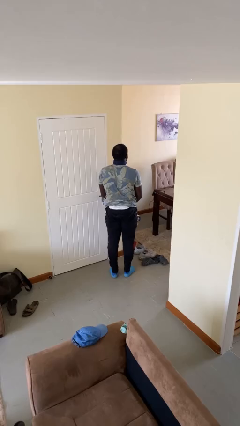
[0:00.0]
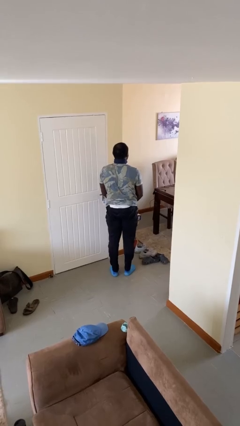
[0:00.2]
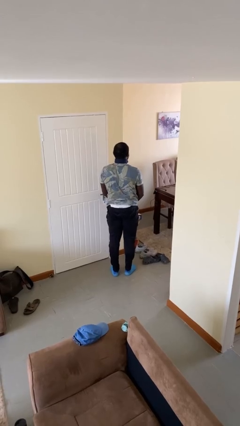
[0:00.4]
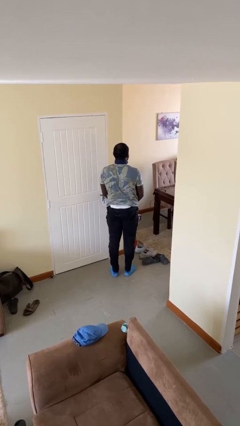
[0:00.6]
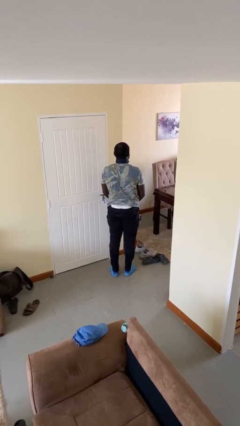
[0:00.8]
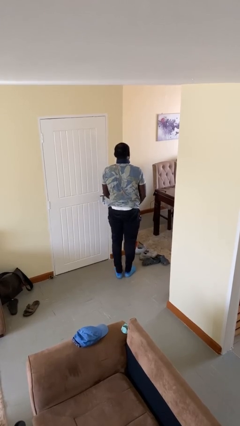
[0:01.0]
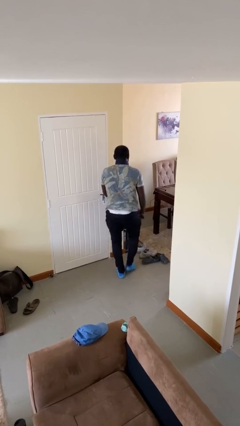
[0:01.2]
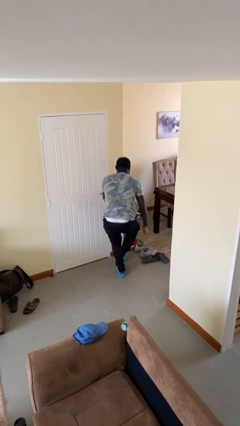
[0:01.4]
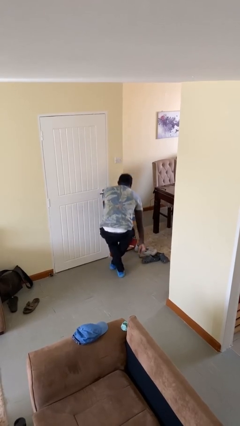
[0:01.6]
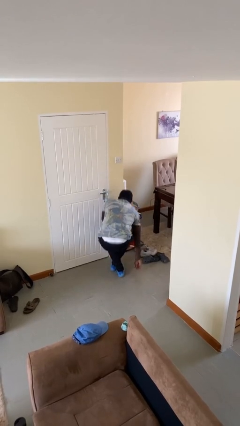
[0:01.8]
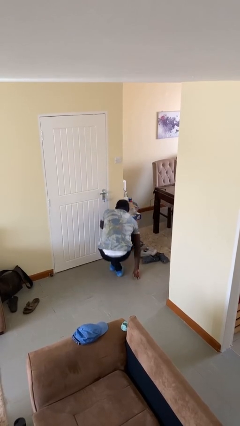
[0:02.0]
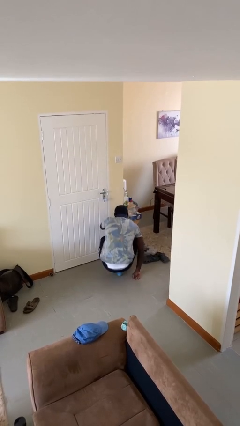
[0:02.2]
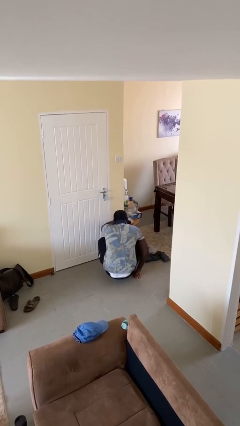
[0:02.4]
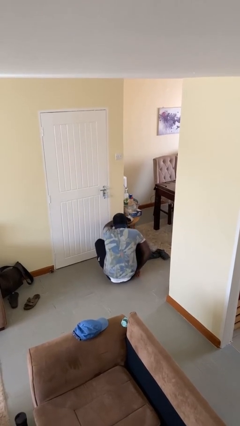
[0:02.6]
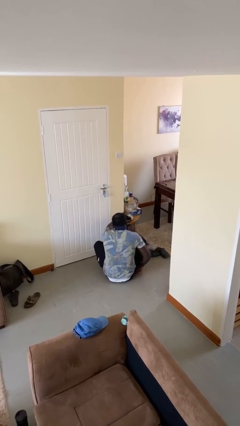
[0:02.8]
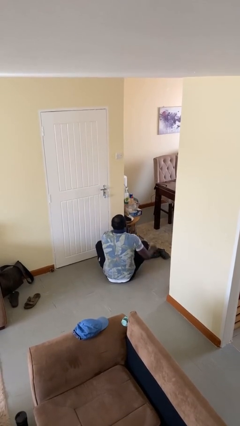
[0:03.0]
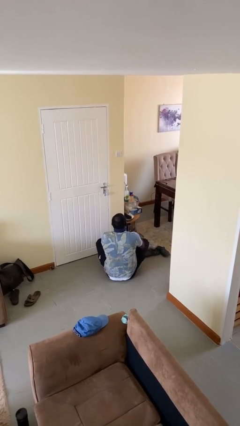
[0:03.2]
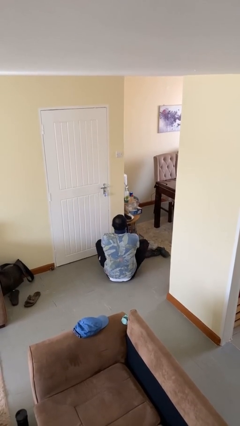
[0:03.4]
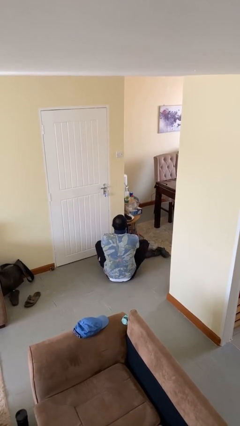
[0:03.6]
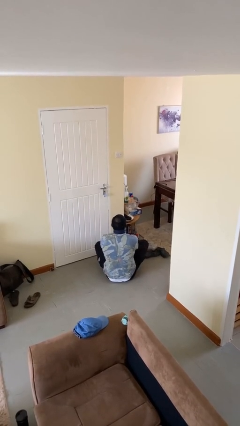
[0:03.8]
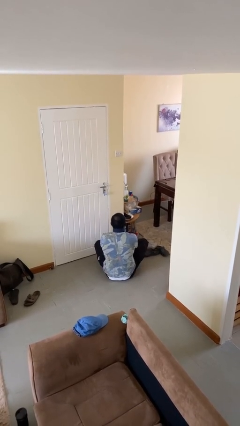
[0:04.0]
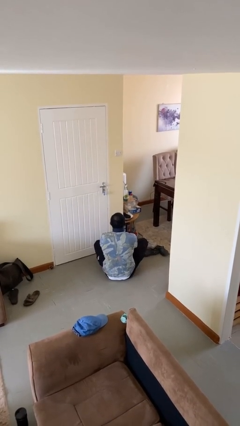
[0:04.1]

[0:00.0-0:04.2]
person sits crisscross

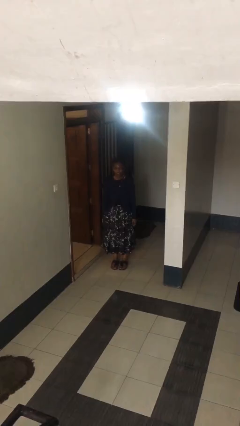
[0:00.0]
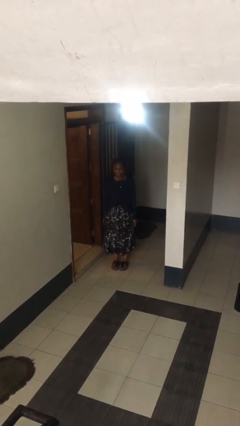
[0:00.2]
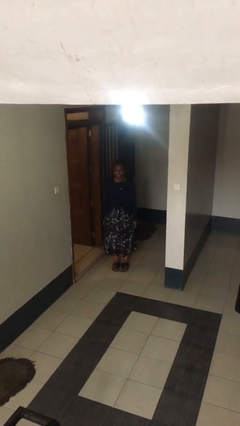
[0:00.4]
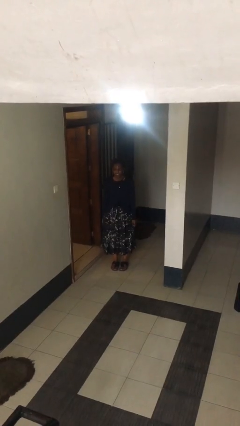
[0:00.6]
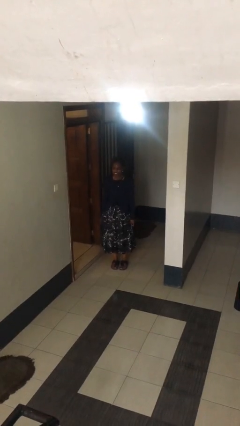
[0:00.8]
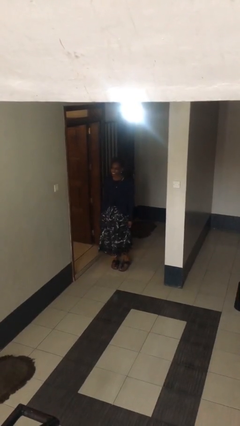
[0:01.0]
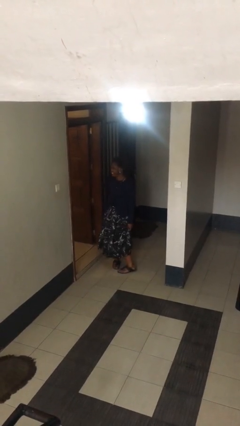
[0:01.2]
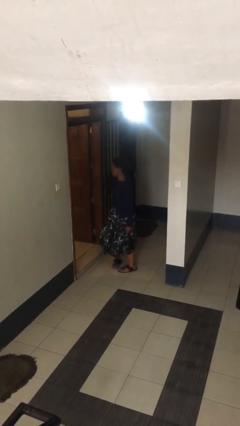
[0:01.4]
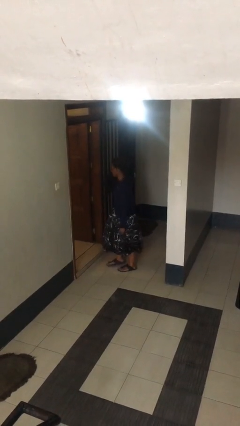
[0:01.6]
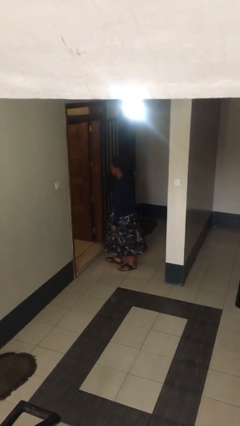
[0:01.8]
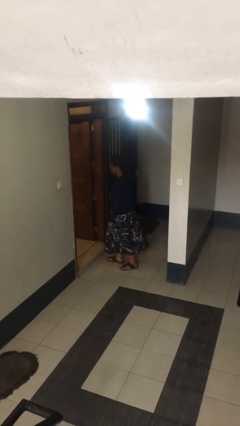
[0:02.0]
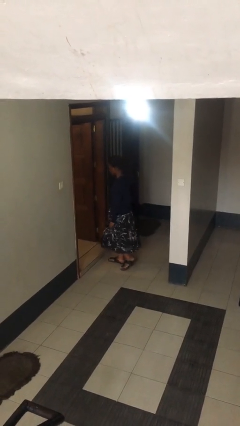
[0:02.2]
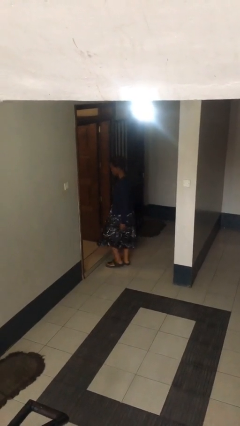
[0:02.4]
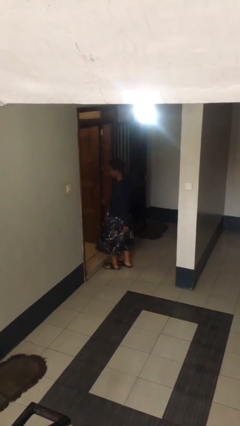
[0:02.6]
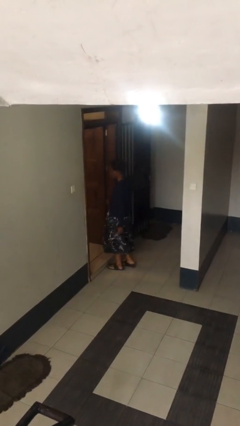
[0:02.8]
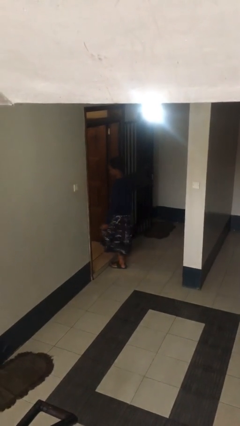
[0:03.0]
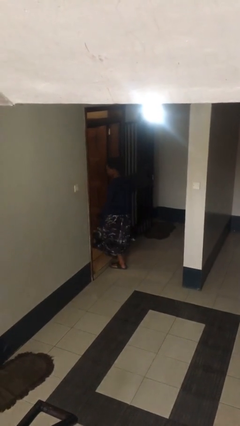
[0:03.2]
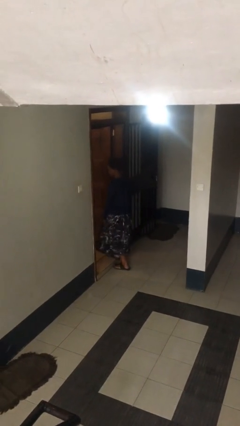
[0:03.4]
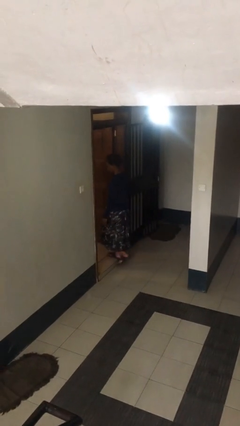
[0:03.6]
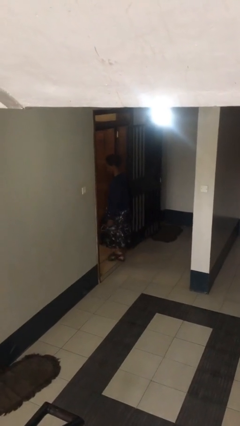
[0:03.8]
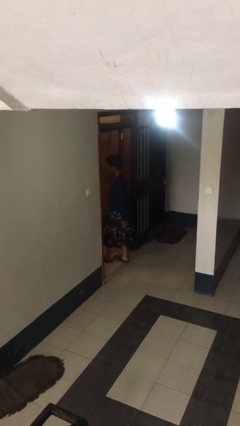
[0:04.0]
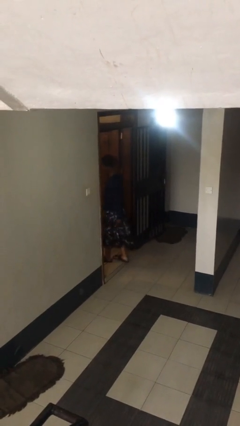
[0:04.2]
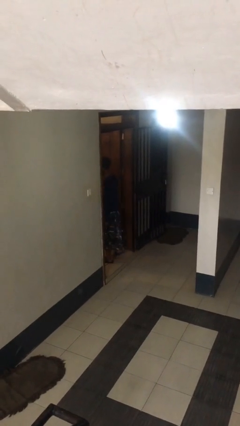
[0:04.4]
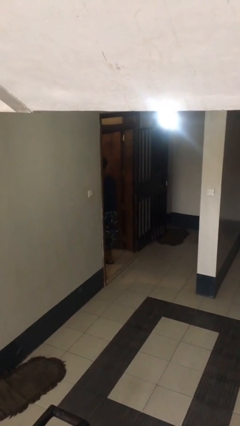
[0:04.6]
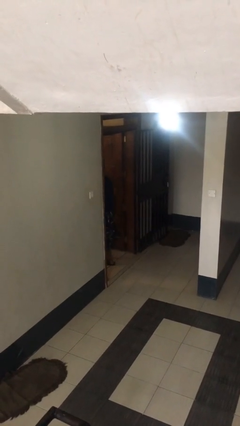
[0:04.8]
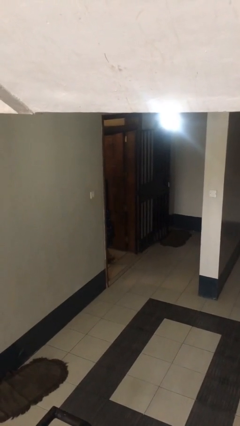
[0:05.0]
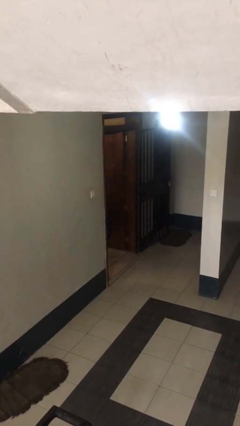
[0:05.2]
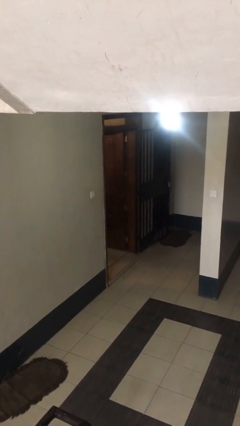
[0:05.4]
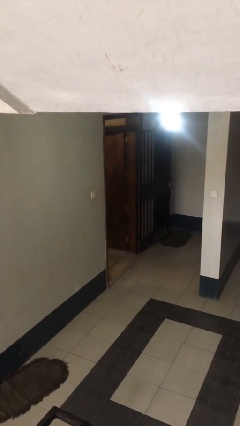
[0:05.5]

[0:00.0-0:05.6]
person exits scene through structure

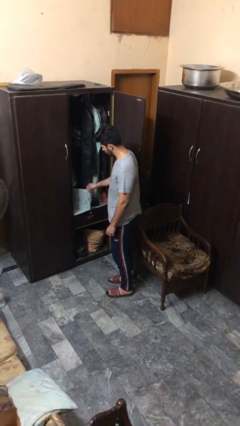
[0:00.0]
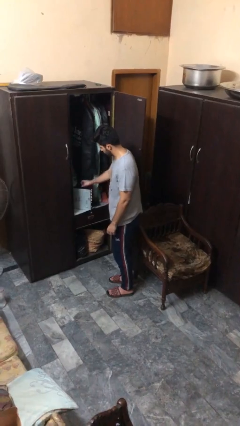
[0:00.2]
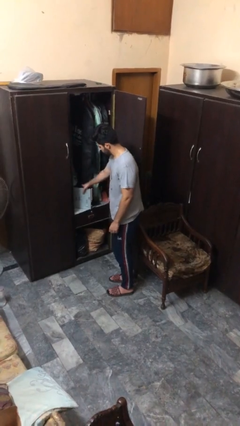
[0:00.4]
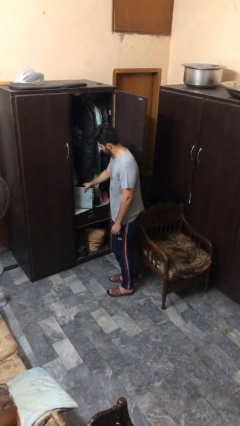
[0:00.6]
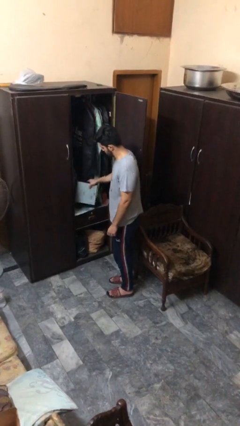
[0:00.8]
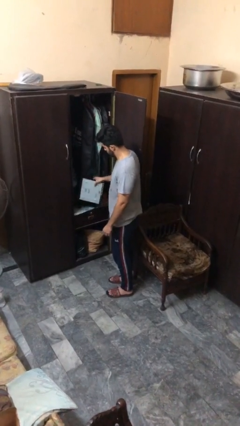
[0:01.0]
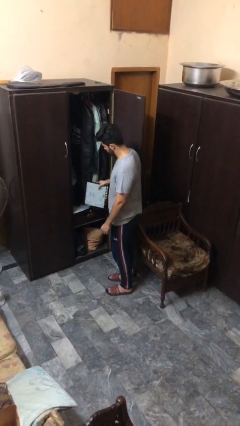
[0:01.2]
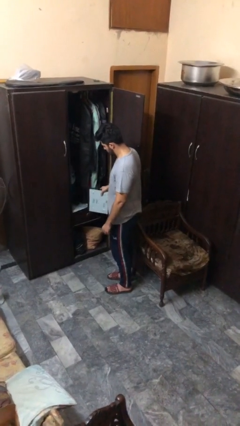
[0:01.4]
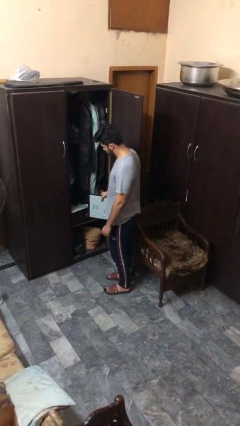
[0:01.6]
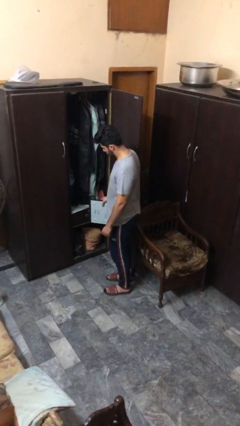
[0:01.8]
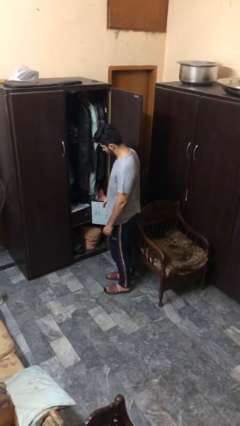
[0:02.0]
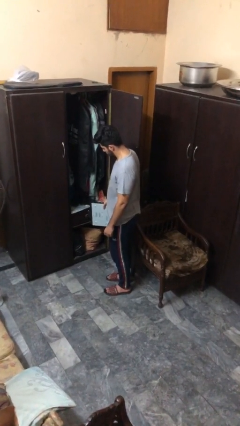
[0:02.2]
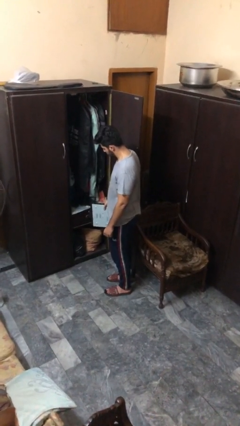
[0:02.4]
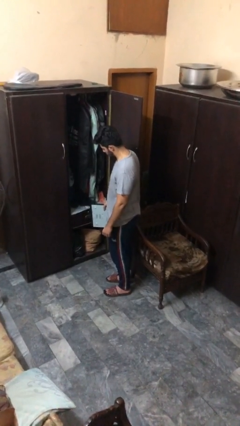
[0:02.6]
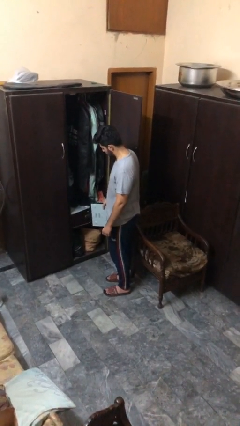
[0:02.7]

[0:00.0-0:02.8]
person picks up object from countertop

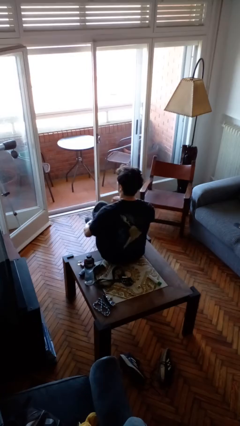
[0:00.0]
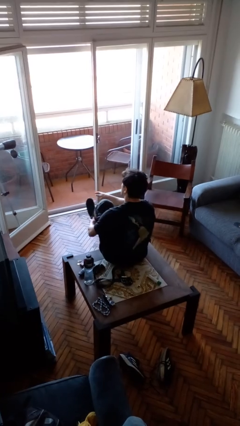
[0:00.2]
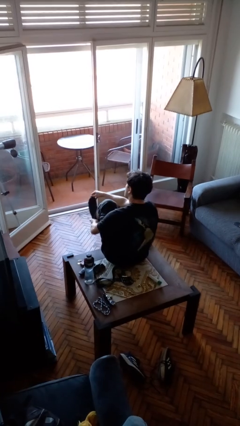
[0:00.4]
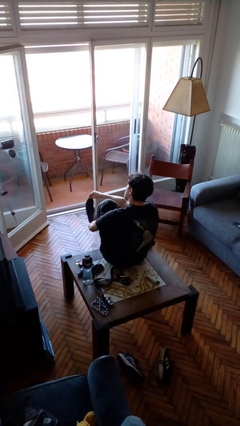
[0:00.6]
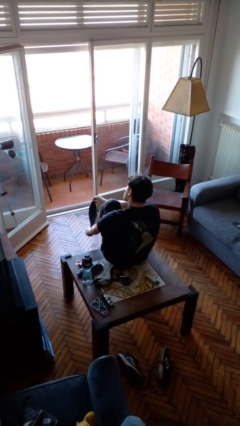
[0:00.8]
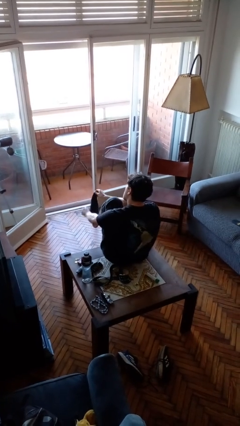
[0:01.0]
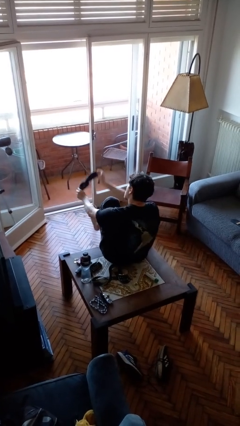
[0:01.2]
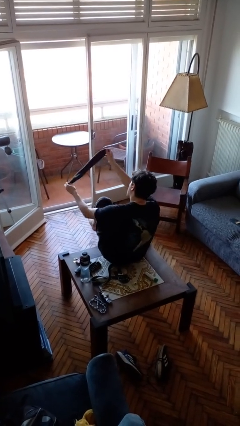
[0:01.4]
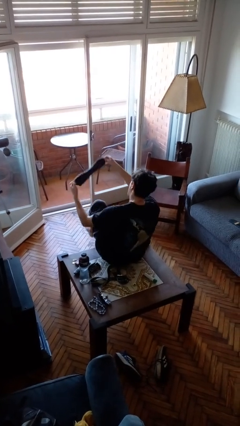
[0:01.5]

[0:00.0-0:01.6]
person takes off socks

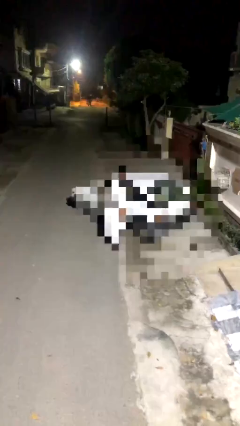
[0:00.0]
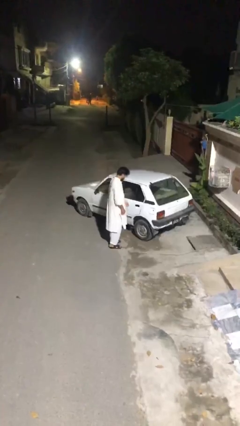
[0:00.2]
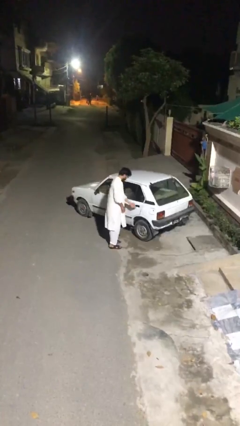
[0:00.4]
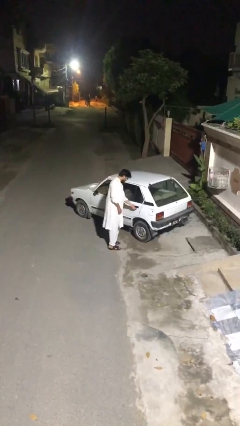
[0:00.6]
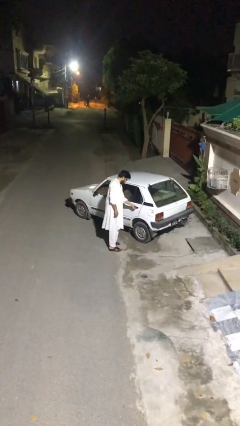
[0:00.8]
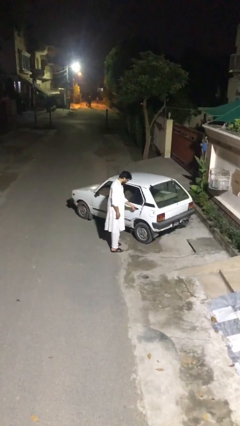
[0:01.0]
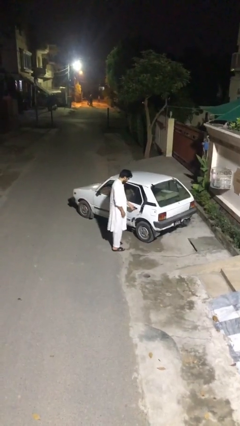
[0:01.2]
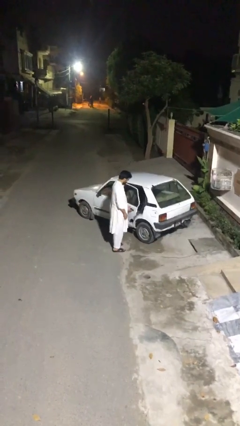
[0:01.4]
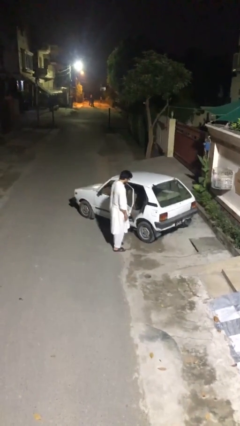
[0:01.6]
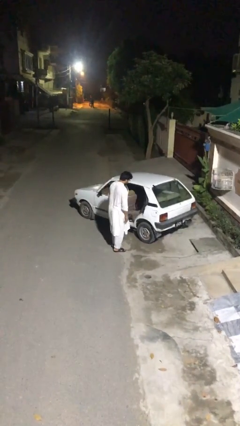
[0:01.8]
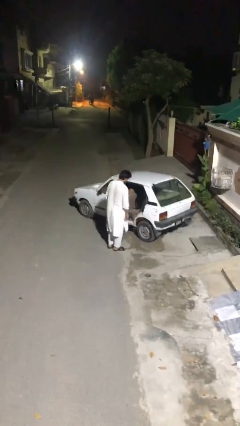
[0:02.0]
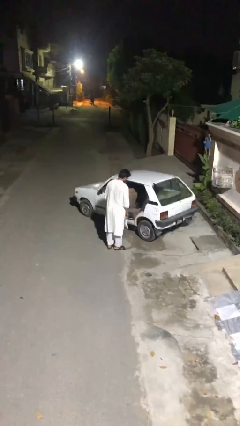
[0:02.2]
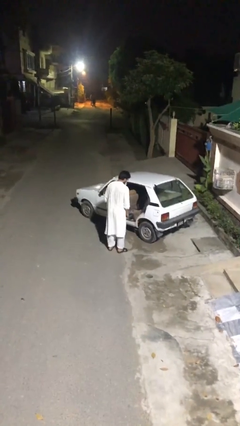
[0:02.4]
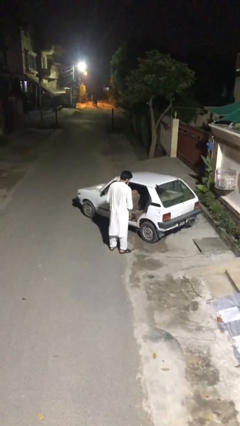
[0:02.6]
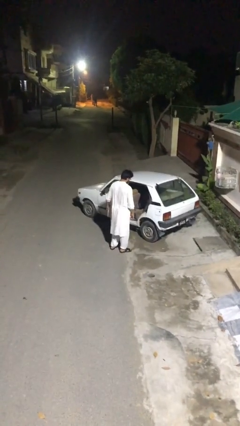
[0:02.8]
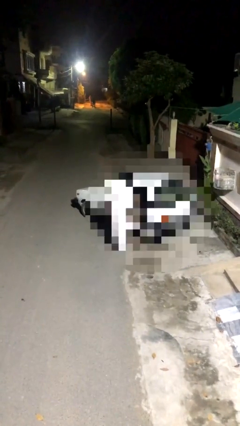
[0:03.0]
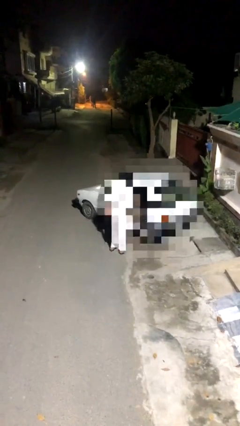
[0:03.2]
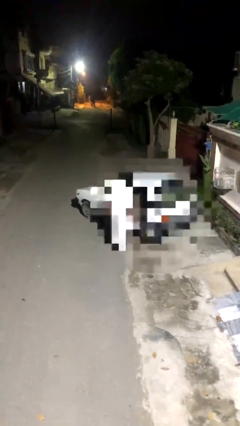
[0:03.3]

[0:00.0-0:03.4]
person opens car door

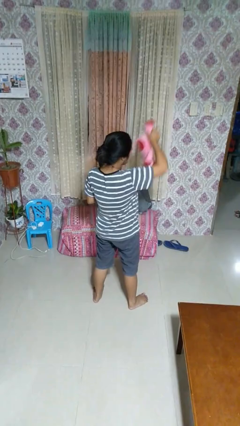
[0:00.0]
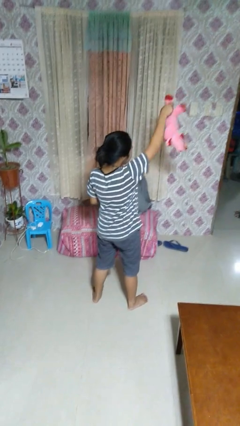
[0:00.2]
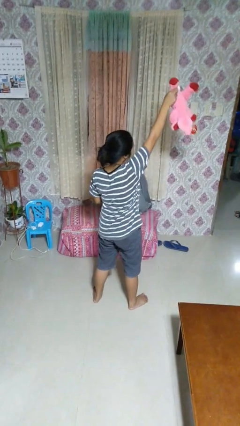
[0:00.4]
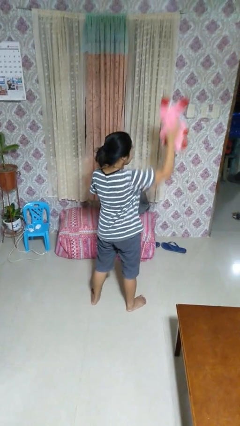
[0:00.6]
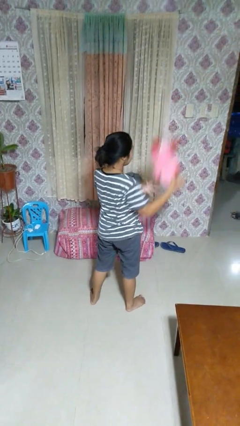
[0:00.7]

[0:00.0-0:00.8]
person drops object
